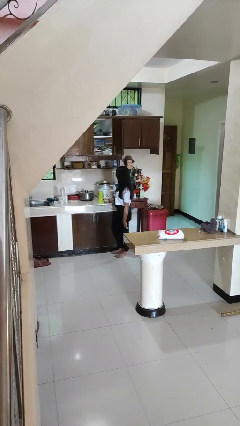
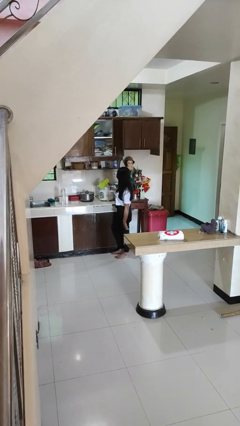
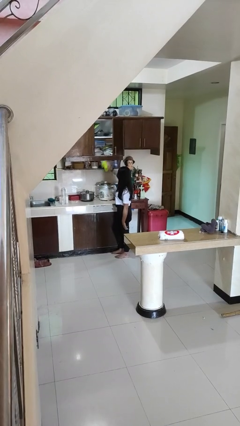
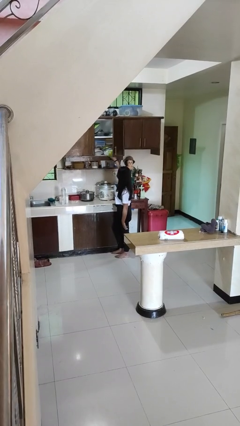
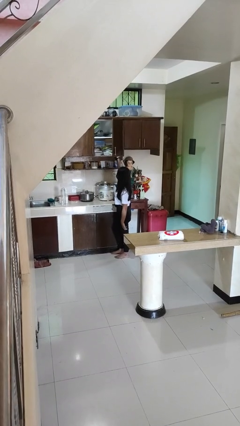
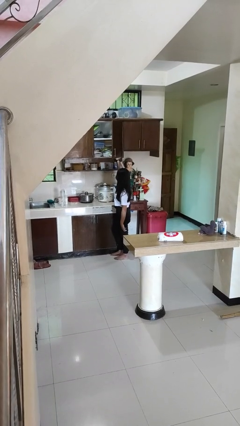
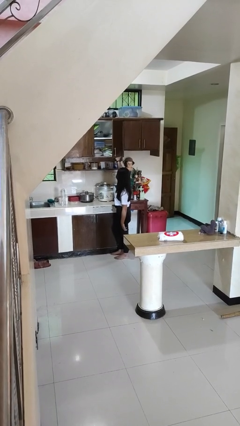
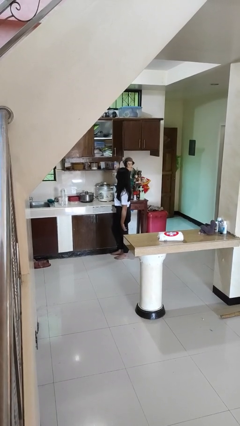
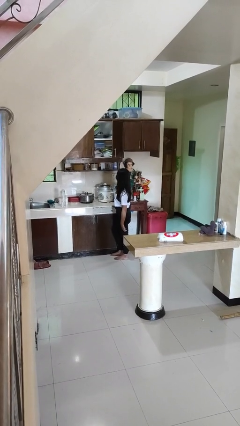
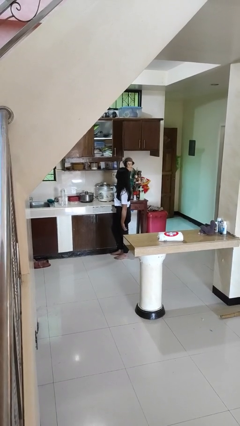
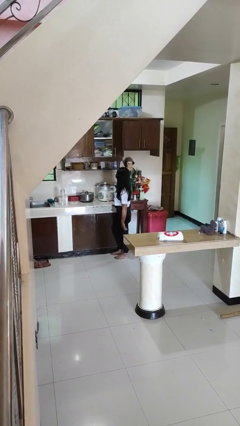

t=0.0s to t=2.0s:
person puts down object into cabinet

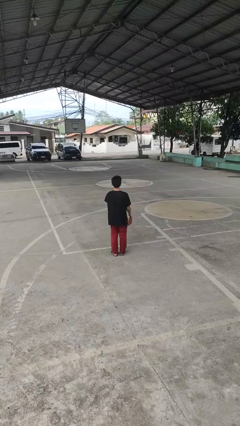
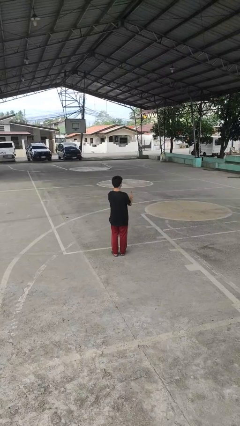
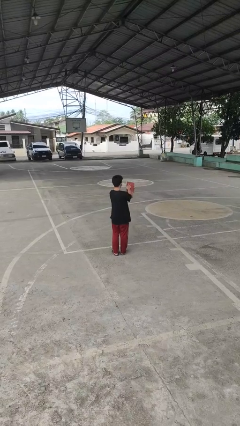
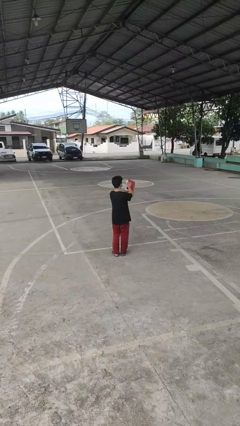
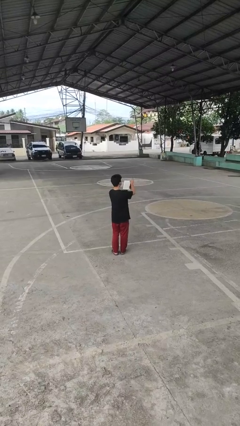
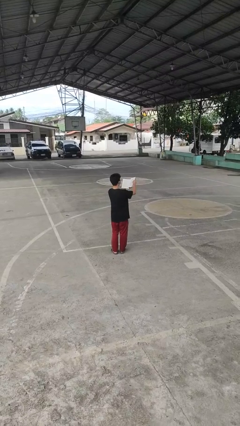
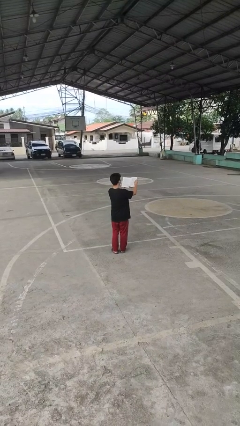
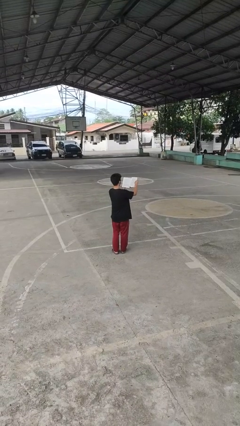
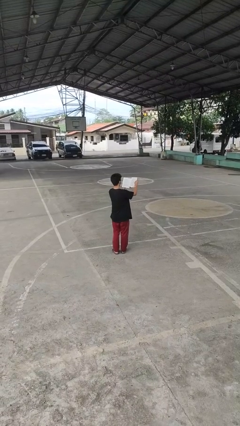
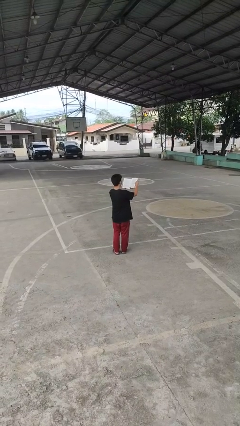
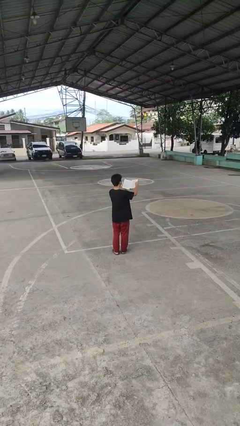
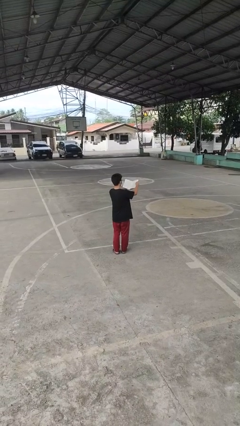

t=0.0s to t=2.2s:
person reads book

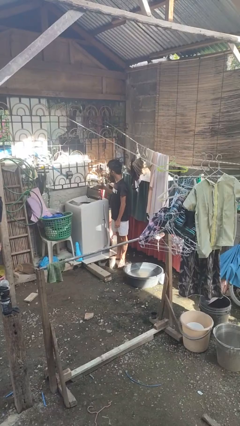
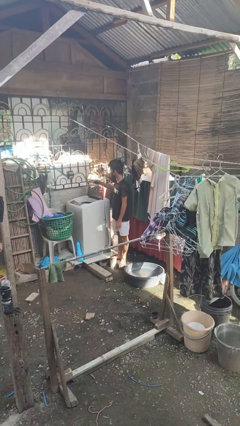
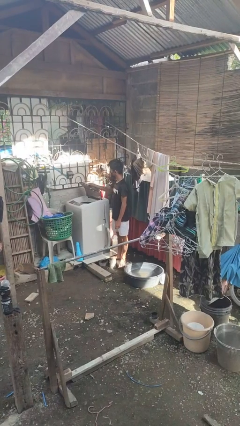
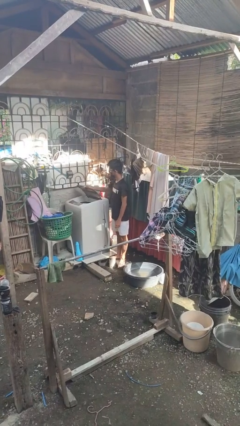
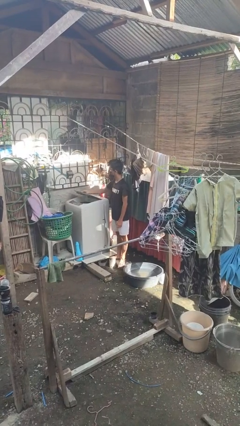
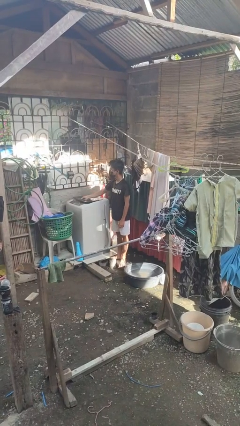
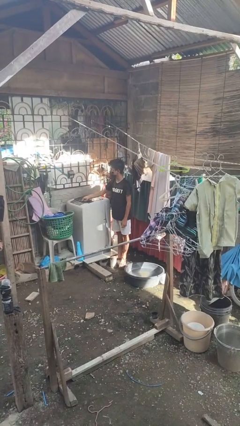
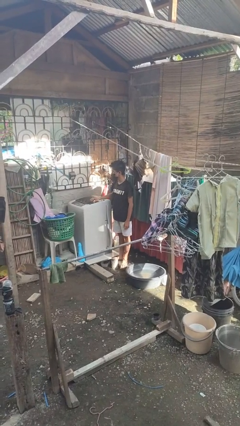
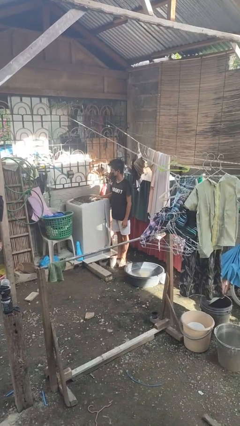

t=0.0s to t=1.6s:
person closes clothes washer

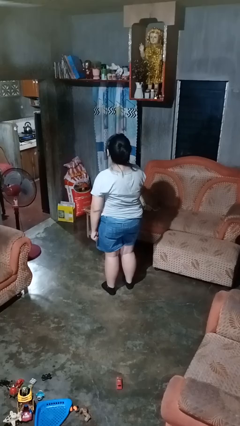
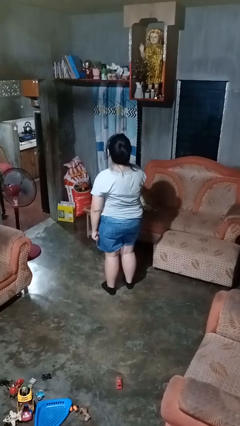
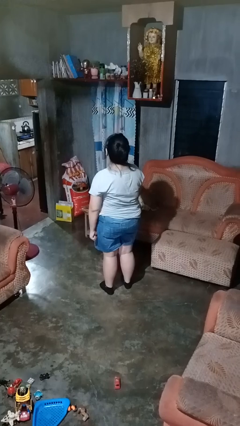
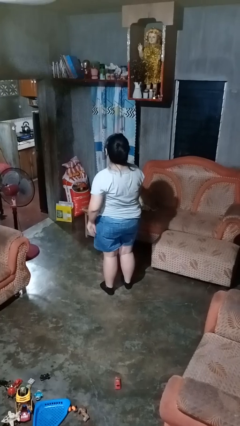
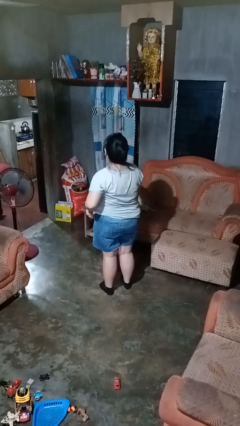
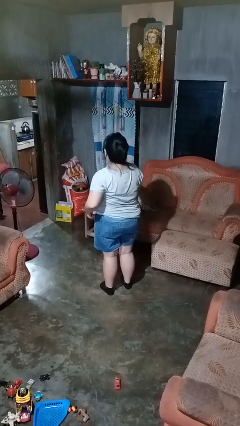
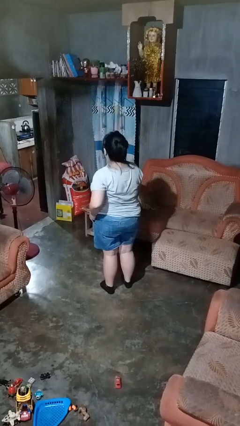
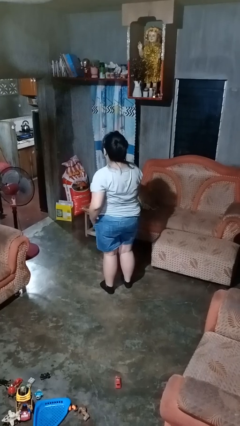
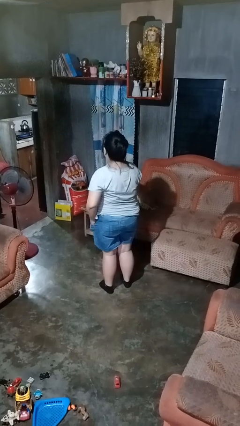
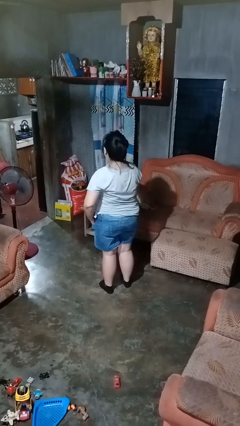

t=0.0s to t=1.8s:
person puts hands in back pockets

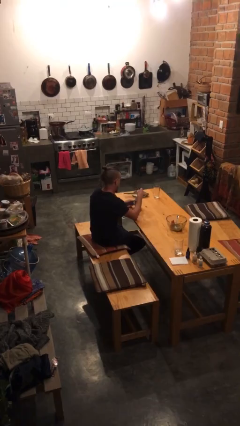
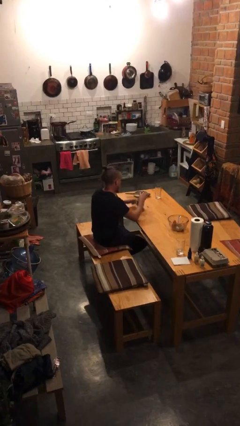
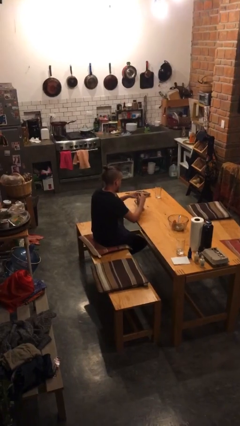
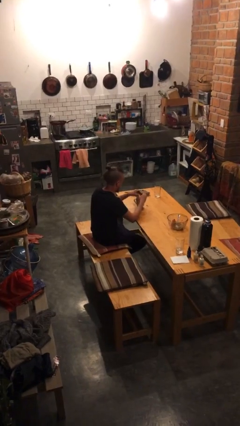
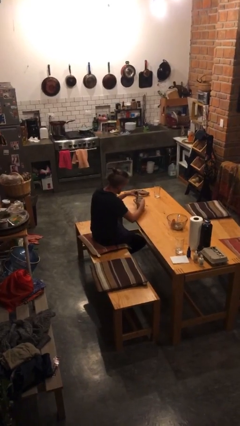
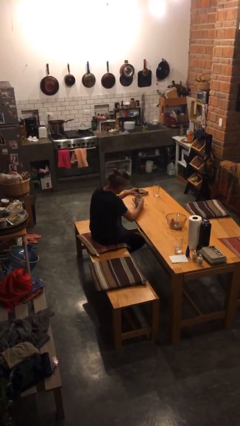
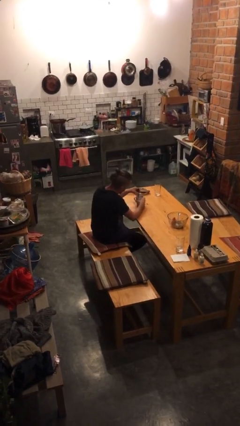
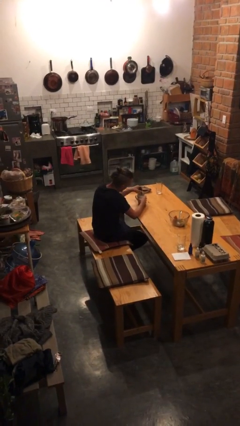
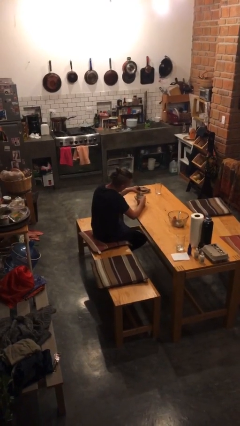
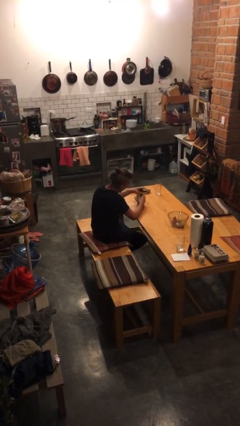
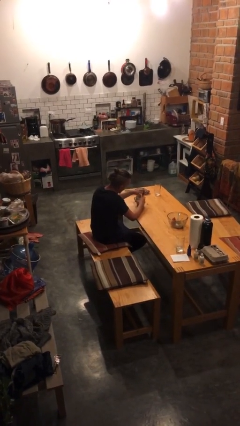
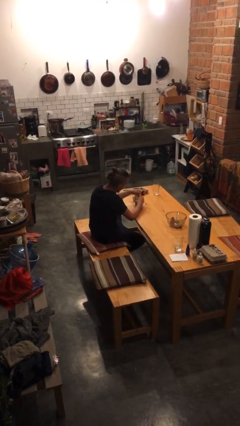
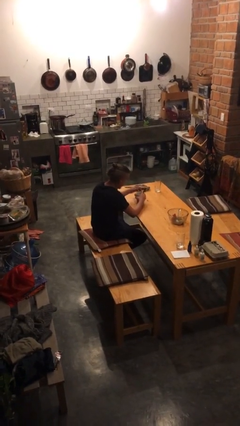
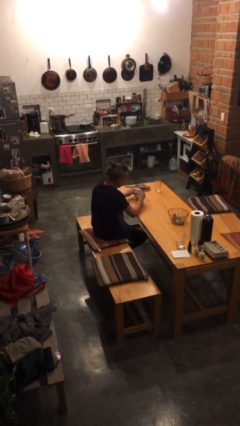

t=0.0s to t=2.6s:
person stirs mug

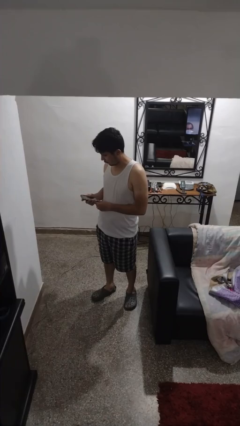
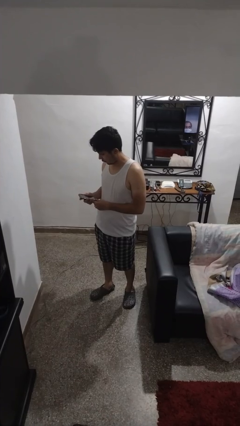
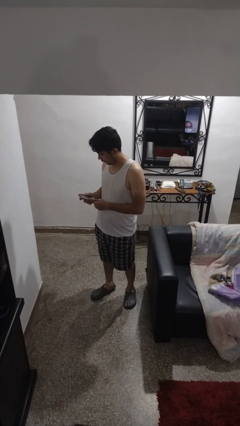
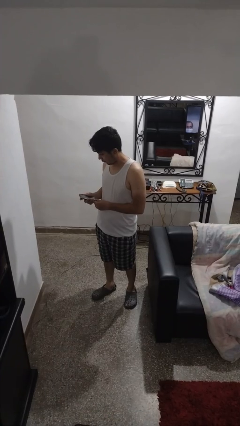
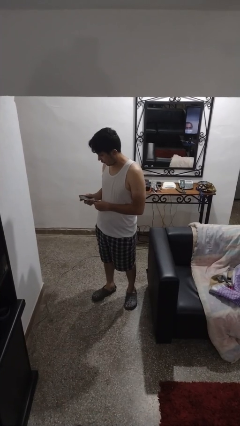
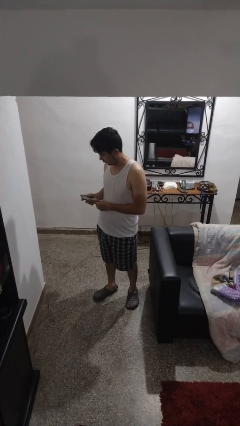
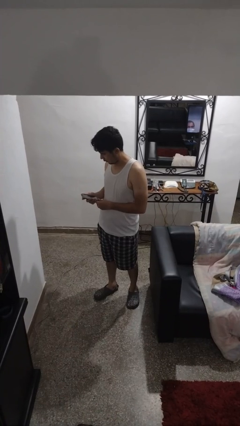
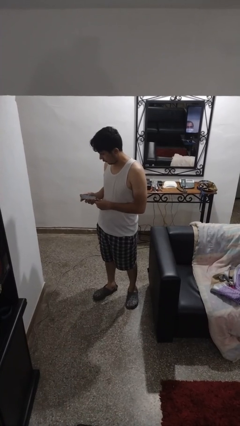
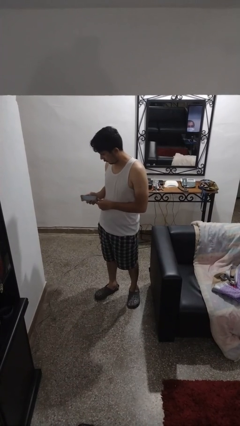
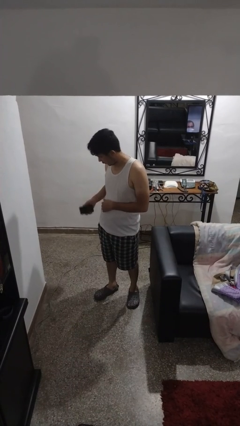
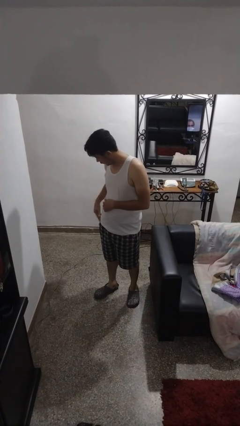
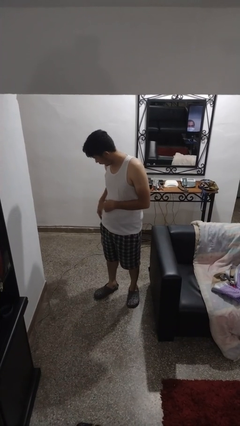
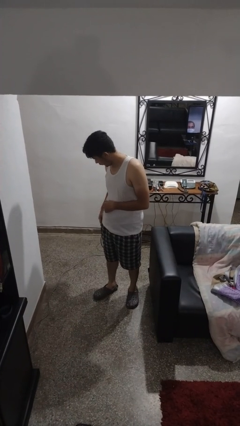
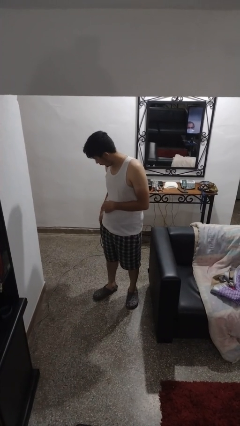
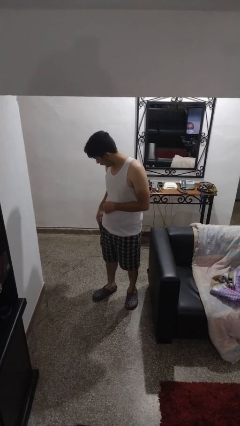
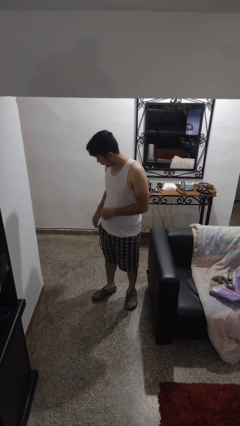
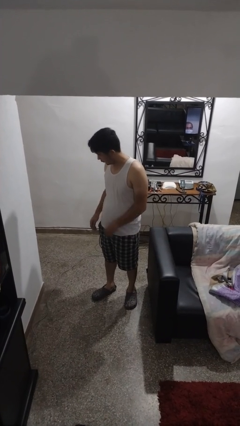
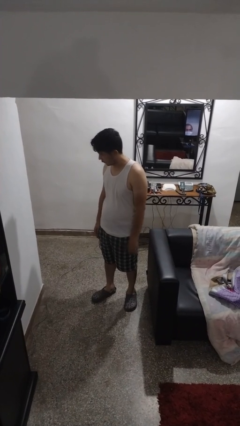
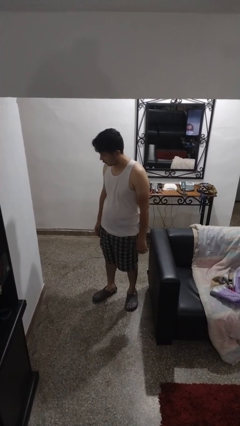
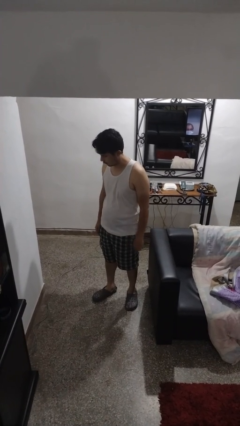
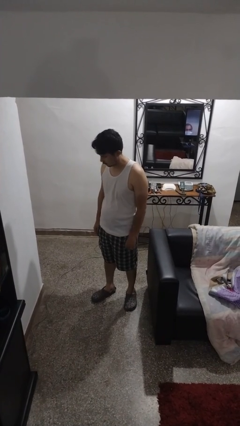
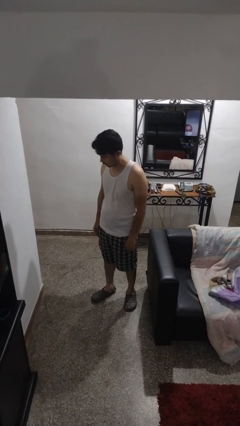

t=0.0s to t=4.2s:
person puts phone into pocket

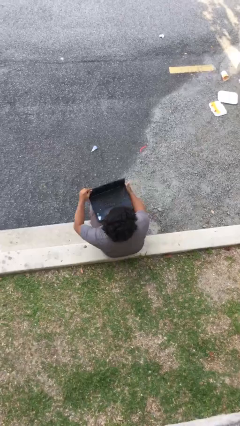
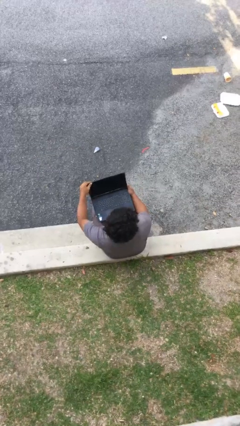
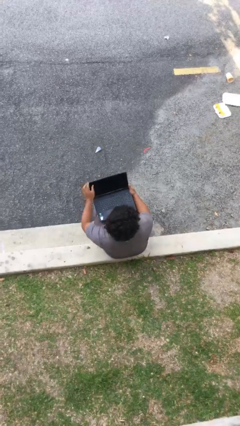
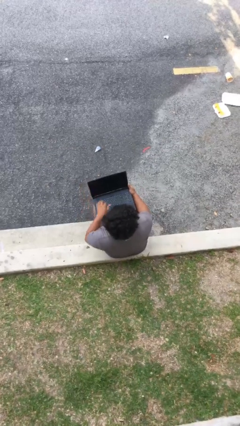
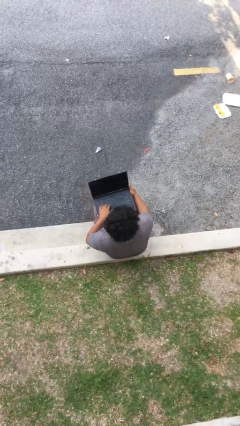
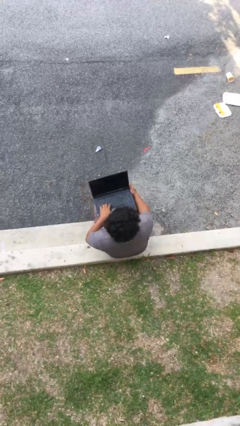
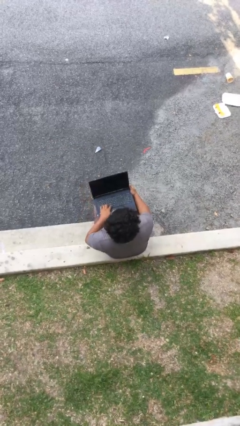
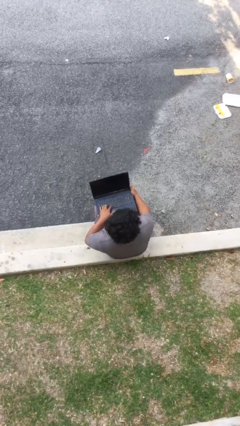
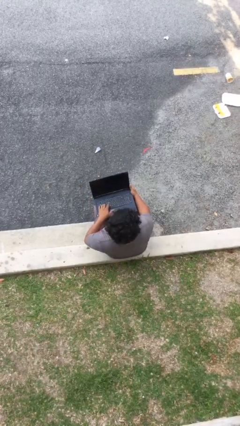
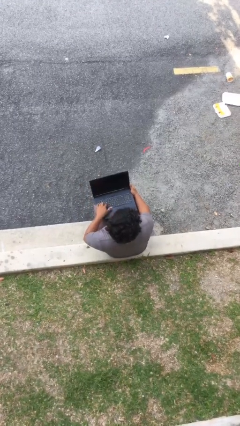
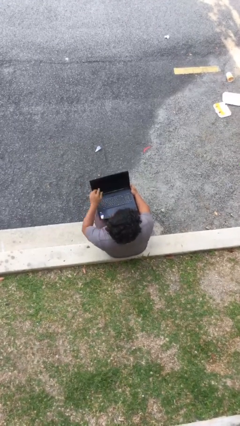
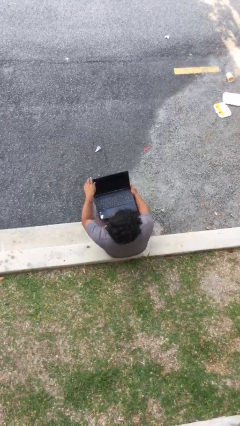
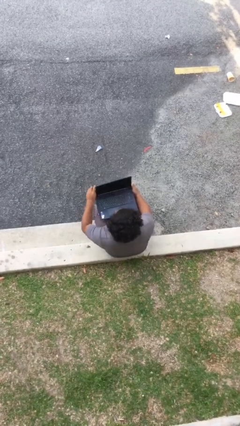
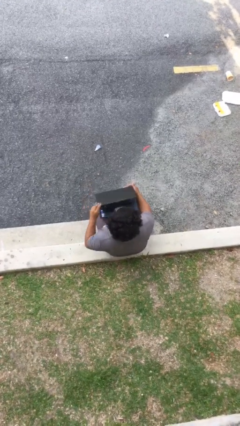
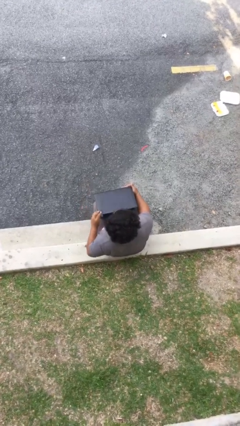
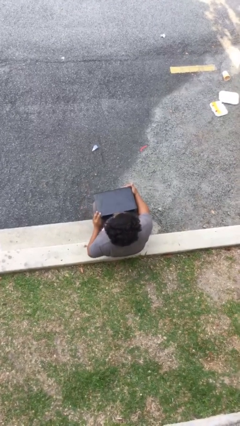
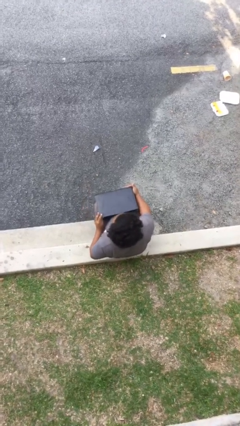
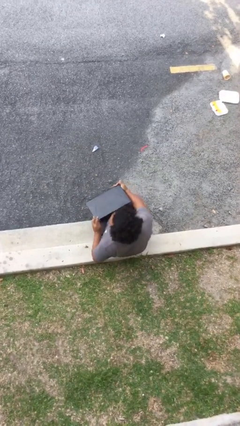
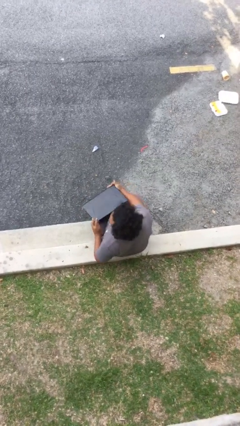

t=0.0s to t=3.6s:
person interacts with laptop
